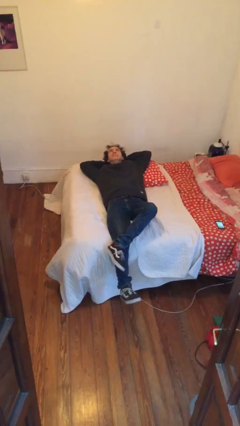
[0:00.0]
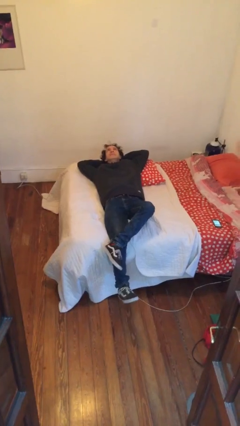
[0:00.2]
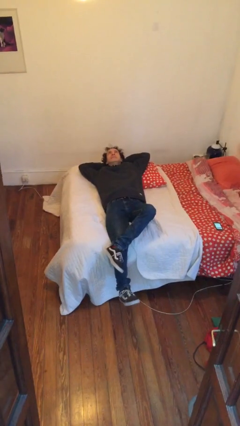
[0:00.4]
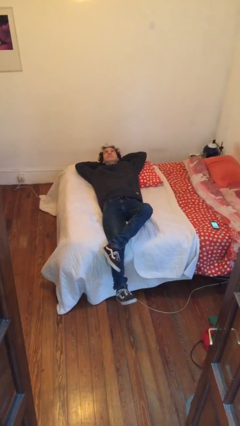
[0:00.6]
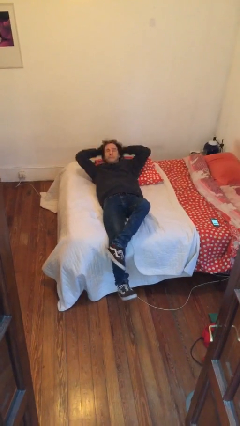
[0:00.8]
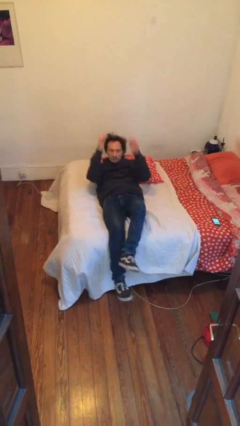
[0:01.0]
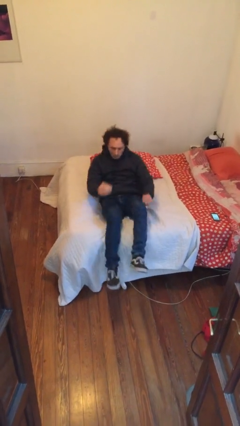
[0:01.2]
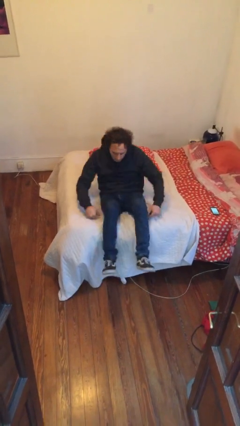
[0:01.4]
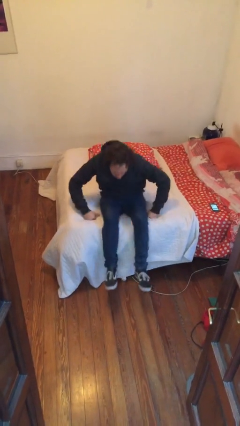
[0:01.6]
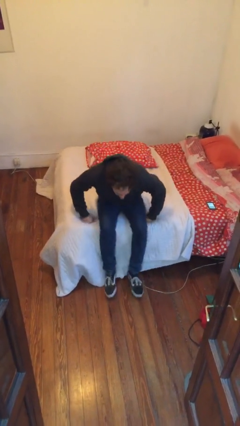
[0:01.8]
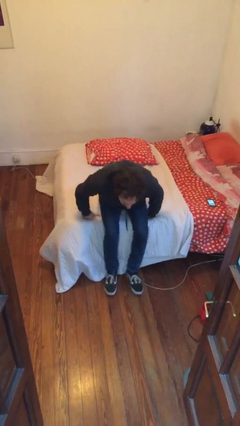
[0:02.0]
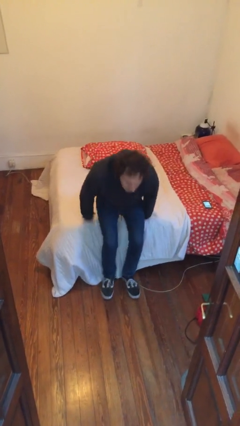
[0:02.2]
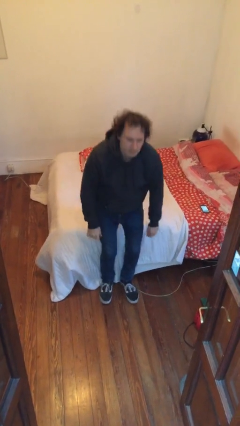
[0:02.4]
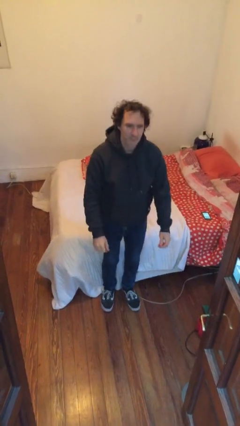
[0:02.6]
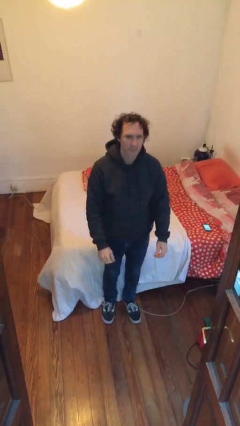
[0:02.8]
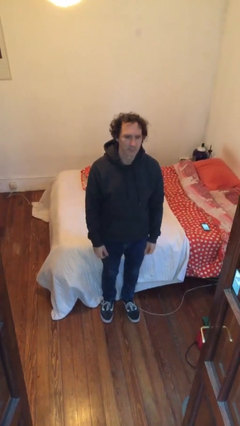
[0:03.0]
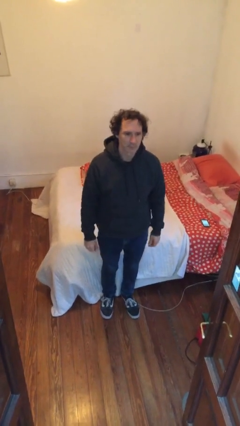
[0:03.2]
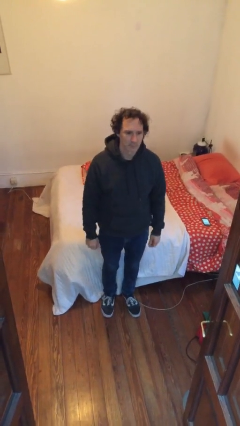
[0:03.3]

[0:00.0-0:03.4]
person stands up

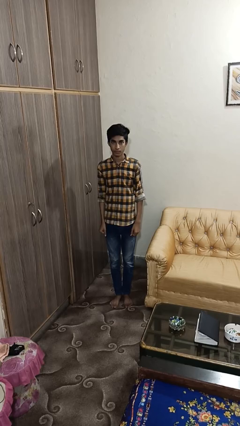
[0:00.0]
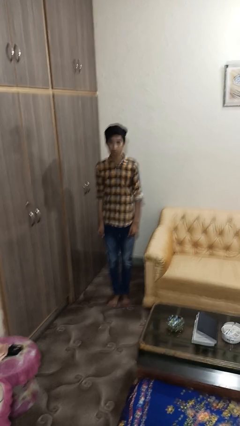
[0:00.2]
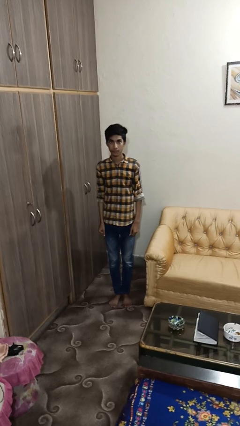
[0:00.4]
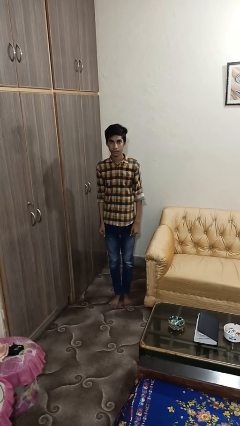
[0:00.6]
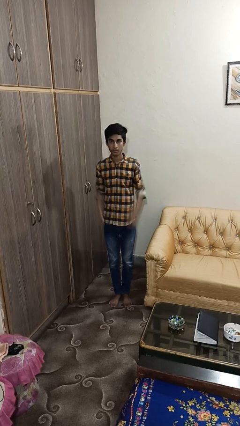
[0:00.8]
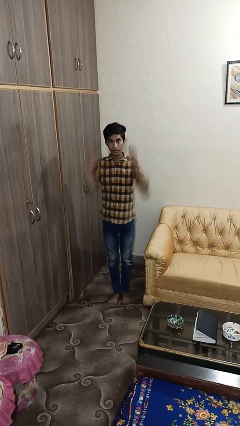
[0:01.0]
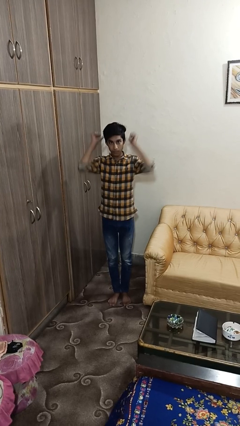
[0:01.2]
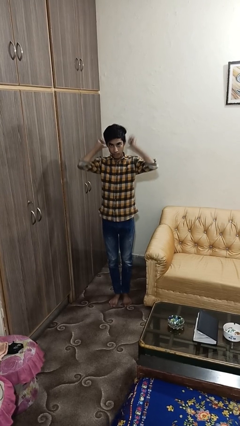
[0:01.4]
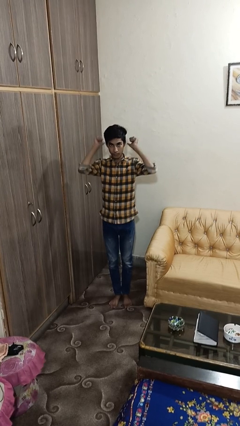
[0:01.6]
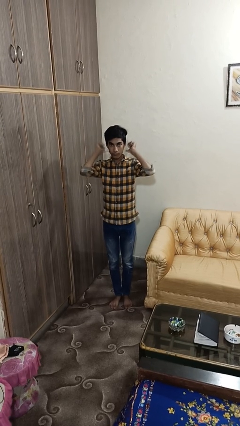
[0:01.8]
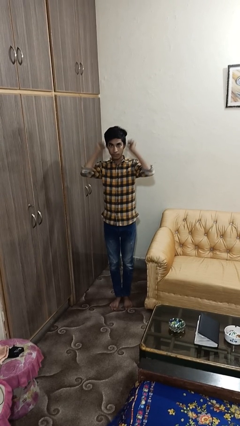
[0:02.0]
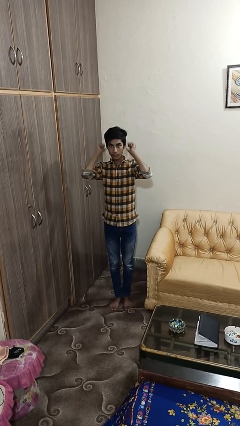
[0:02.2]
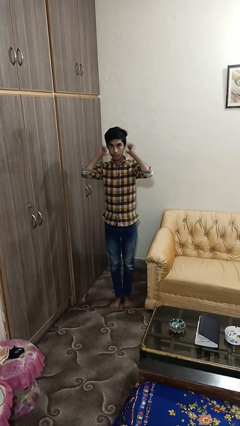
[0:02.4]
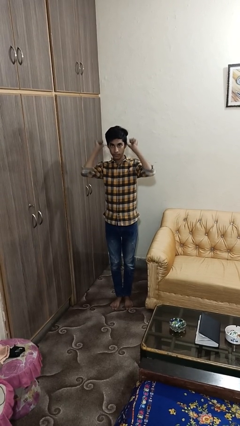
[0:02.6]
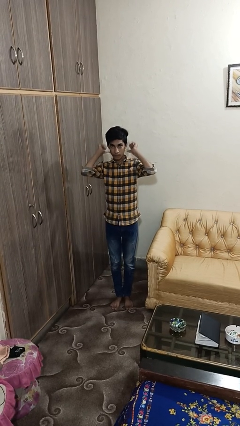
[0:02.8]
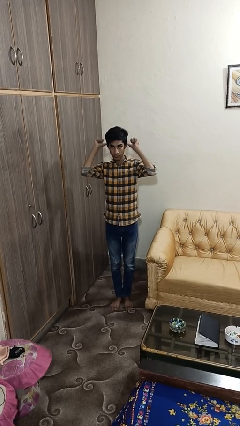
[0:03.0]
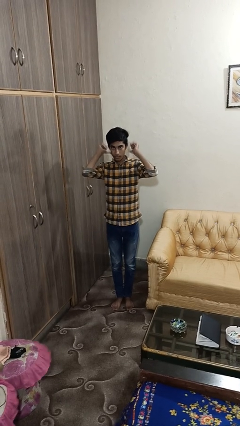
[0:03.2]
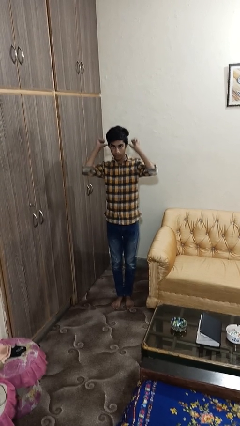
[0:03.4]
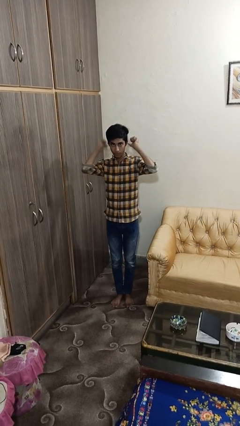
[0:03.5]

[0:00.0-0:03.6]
person gestures behind me

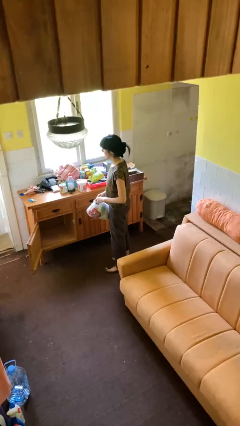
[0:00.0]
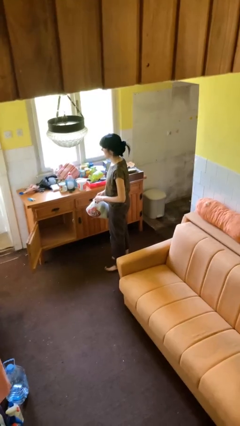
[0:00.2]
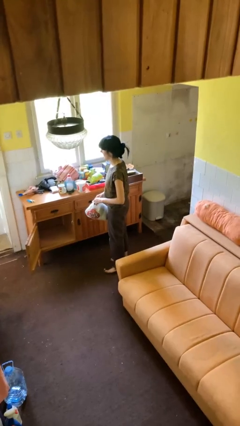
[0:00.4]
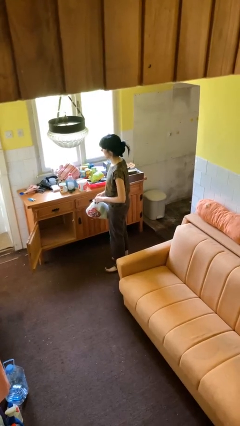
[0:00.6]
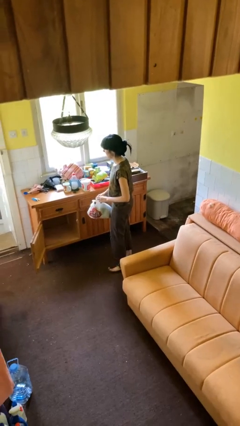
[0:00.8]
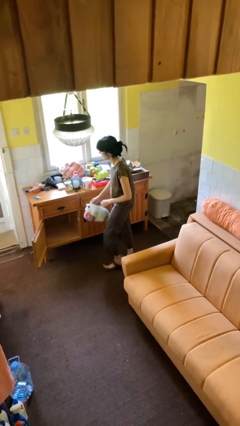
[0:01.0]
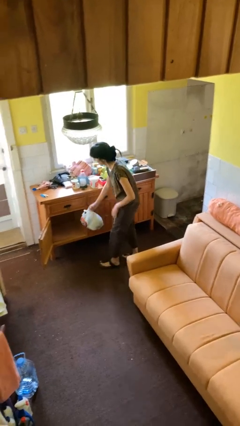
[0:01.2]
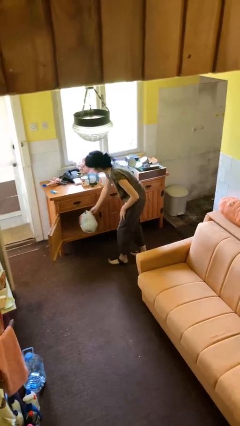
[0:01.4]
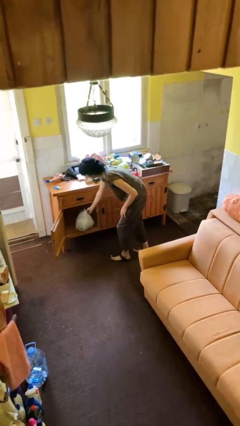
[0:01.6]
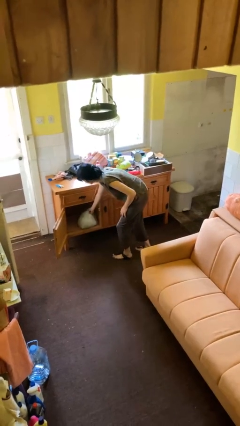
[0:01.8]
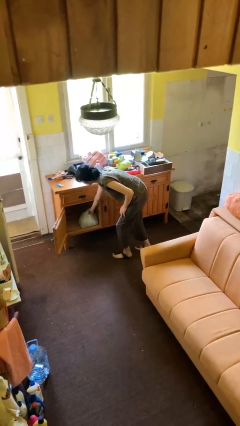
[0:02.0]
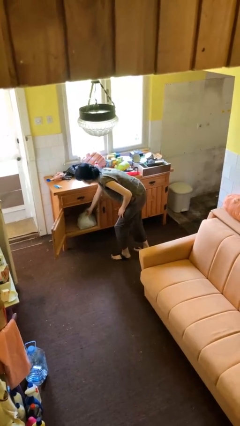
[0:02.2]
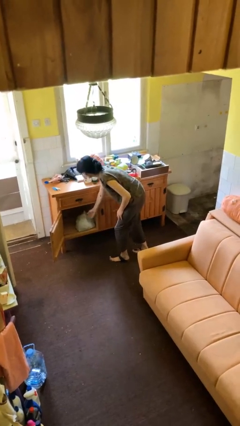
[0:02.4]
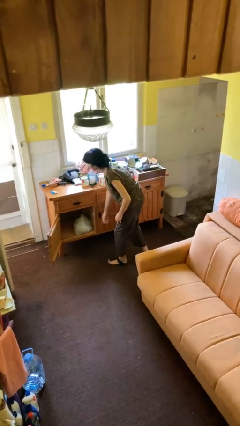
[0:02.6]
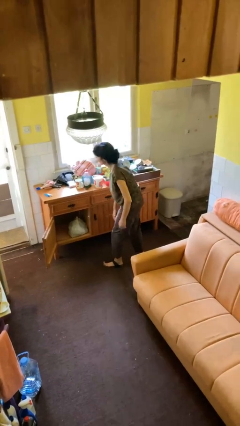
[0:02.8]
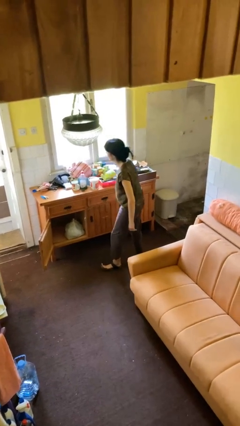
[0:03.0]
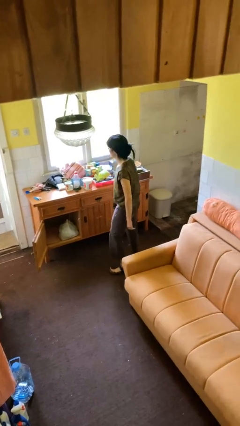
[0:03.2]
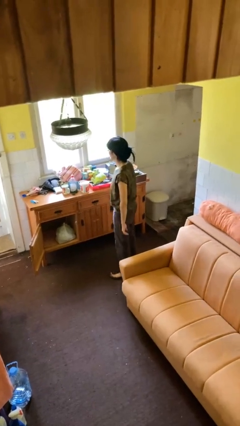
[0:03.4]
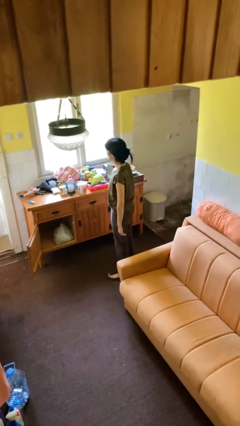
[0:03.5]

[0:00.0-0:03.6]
person puts down object into cabinet

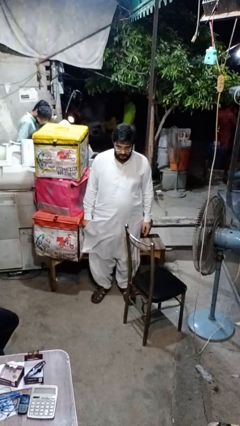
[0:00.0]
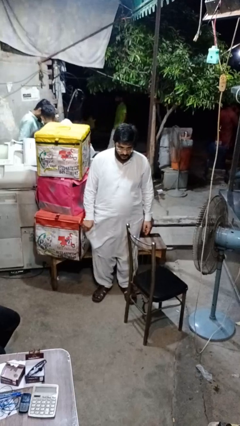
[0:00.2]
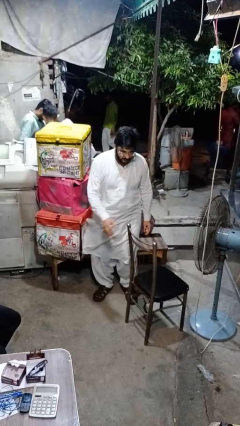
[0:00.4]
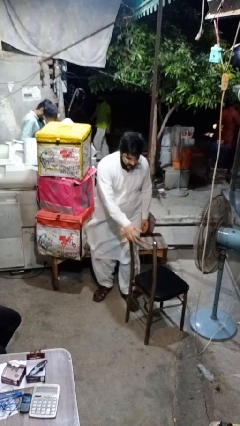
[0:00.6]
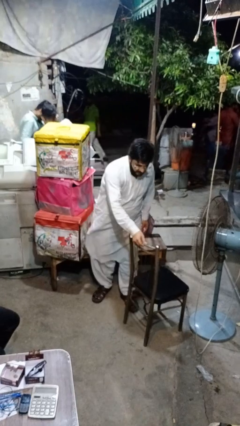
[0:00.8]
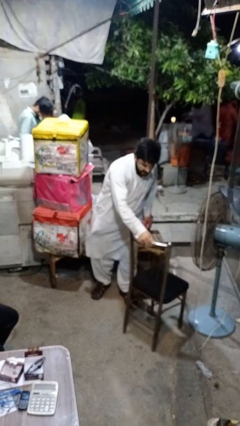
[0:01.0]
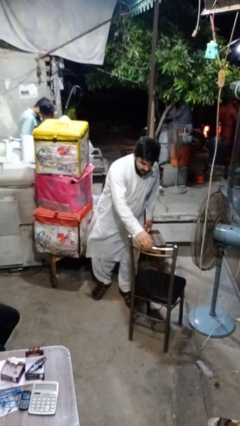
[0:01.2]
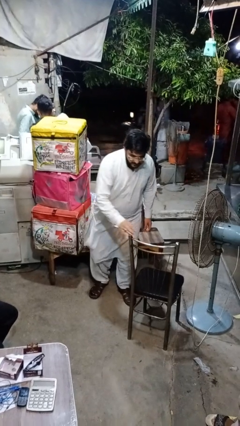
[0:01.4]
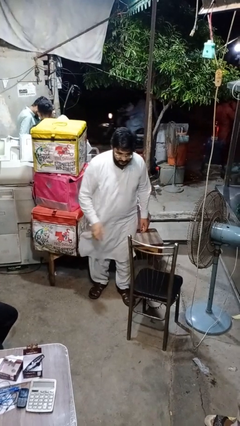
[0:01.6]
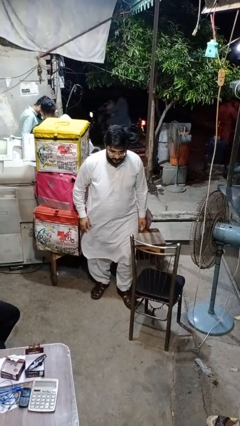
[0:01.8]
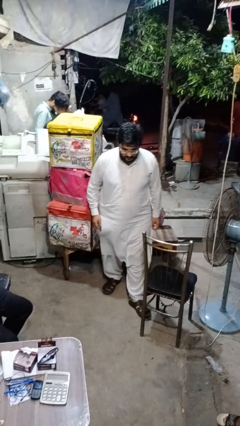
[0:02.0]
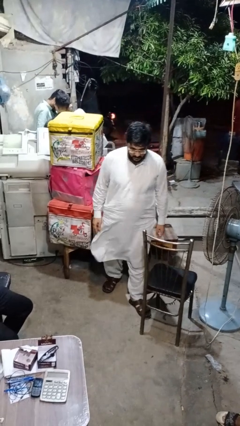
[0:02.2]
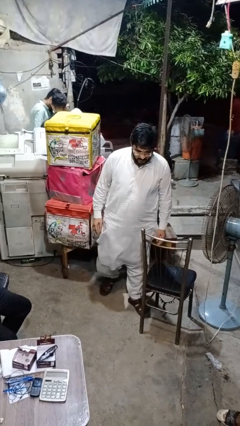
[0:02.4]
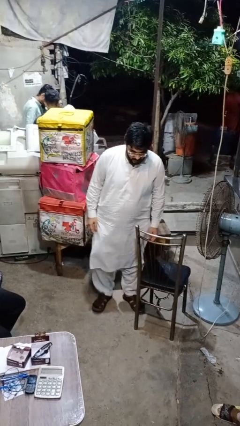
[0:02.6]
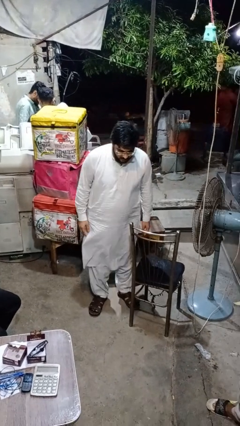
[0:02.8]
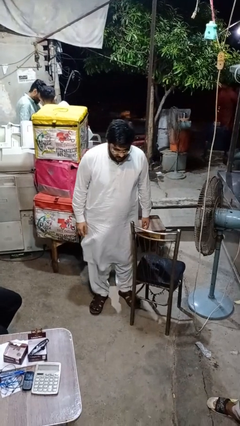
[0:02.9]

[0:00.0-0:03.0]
person trips on object on floor

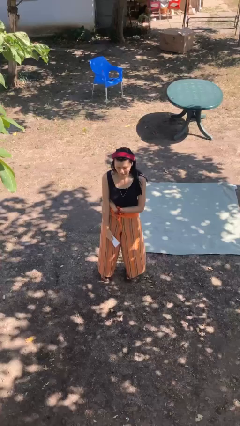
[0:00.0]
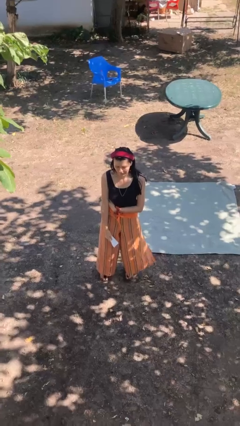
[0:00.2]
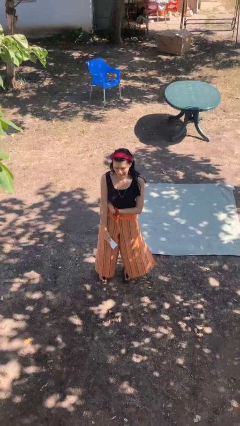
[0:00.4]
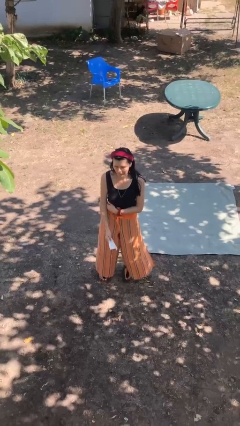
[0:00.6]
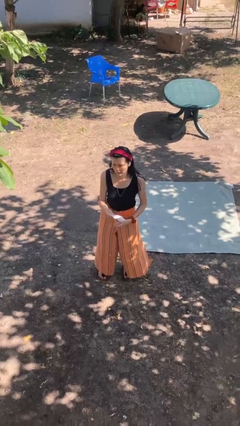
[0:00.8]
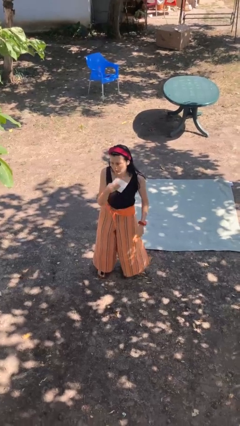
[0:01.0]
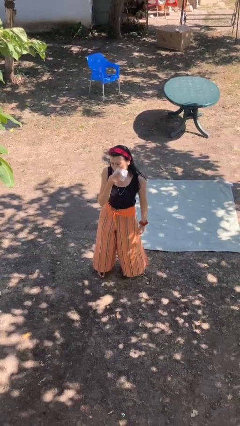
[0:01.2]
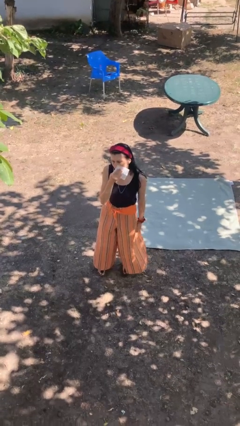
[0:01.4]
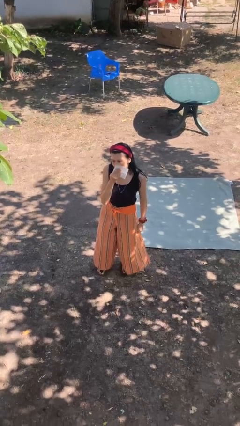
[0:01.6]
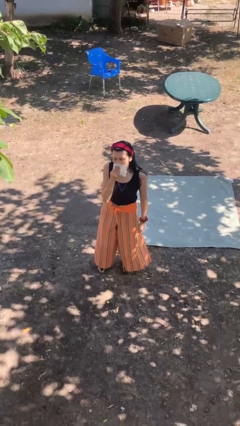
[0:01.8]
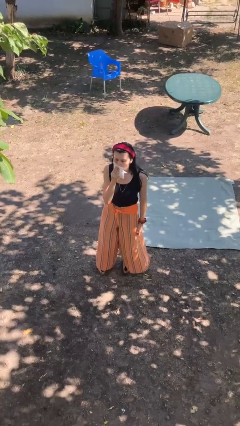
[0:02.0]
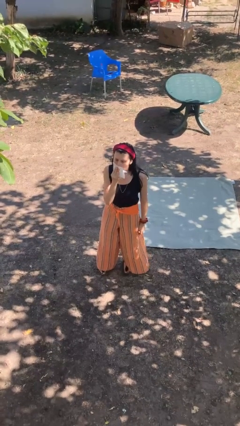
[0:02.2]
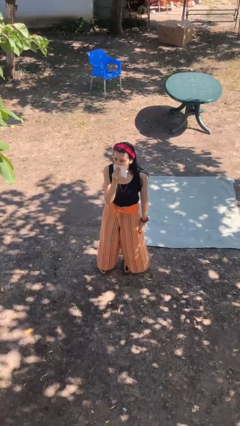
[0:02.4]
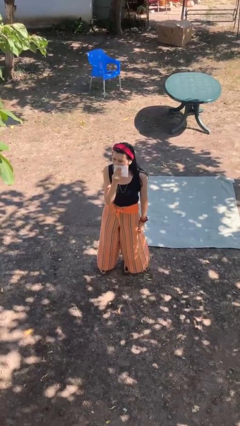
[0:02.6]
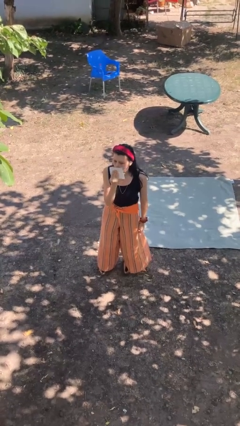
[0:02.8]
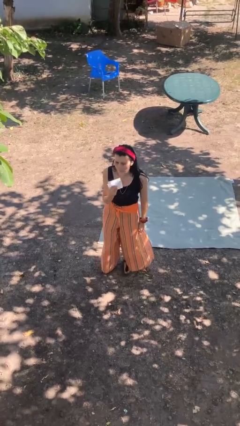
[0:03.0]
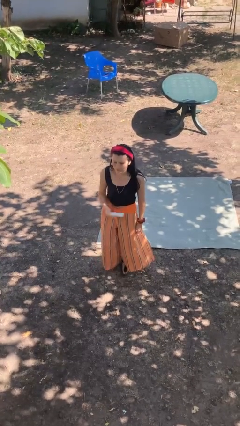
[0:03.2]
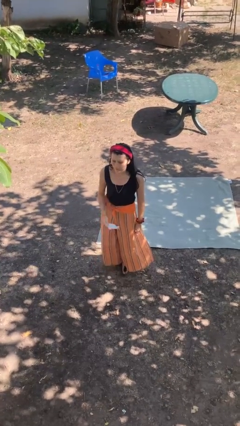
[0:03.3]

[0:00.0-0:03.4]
person wipes mouth with napkin

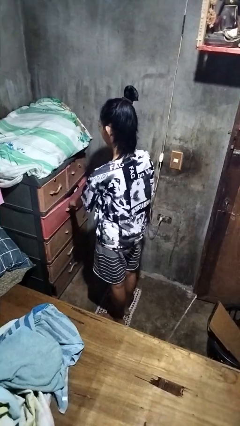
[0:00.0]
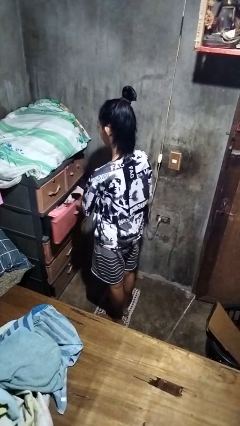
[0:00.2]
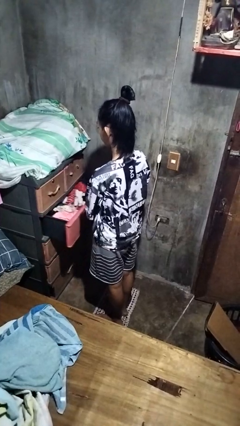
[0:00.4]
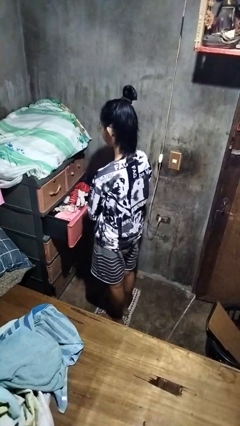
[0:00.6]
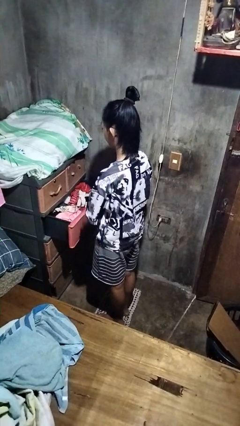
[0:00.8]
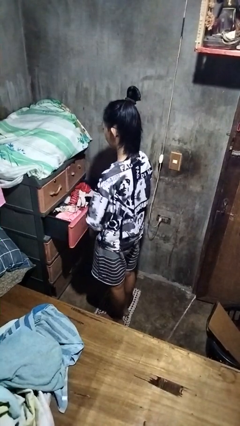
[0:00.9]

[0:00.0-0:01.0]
person opens dresser drawer
